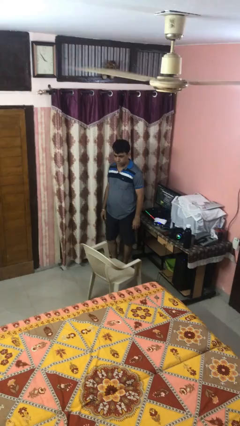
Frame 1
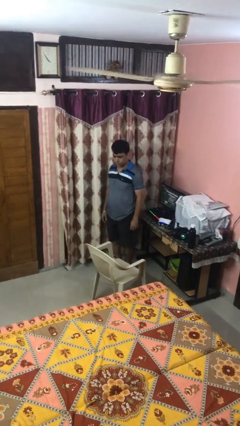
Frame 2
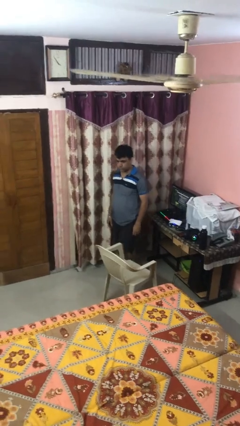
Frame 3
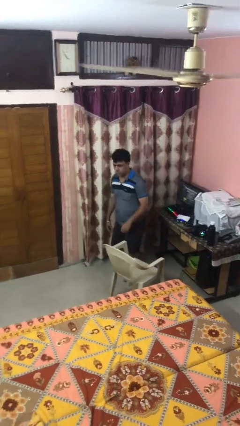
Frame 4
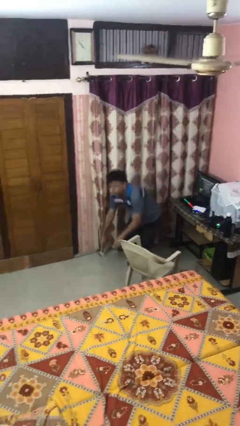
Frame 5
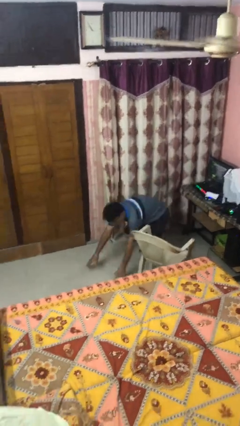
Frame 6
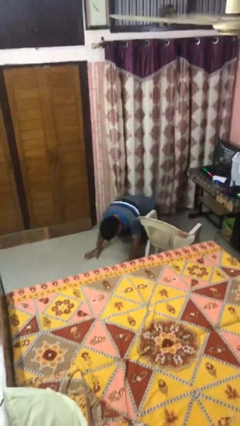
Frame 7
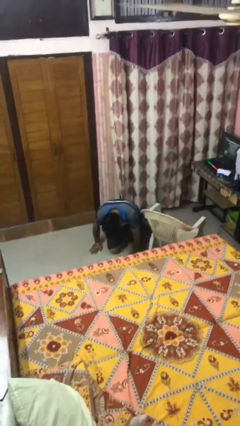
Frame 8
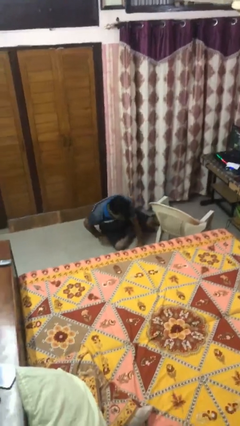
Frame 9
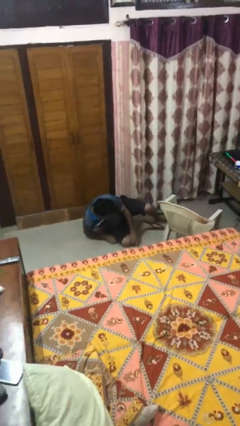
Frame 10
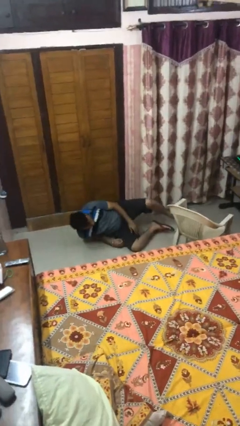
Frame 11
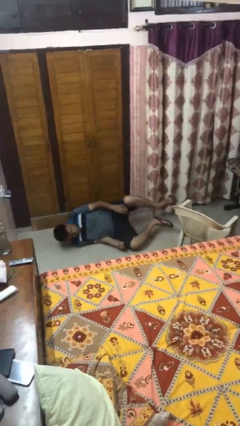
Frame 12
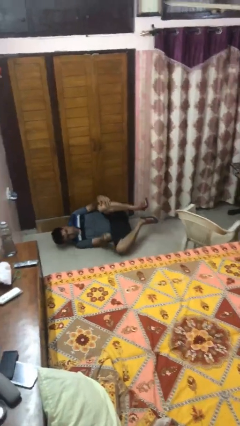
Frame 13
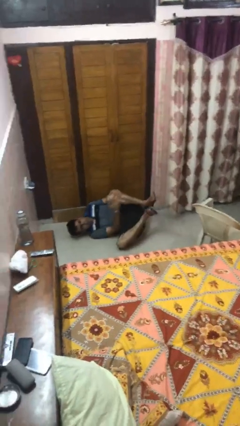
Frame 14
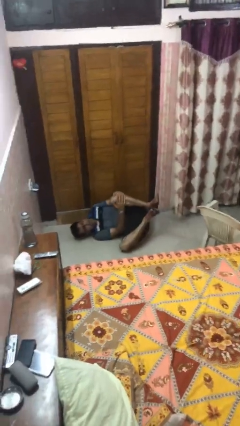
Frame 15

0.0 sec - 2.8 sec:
person trips on object on floor

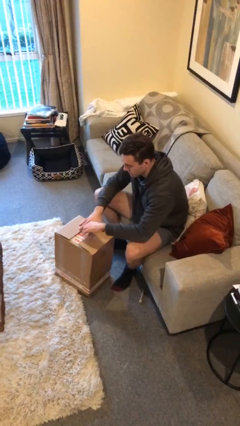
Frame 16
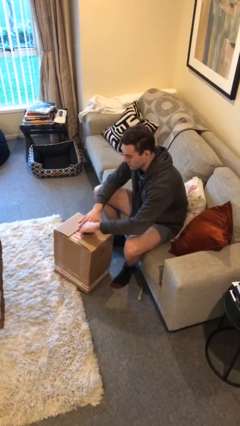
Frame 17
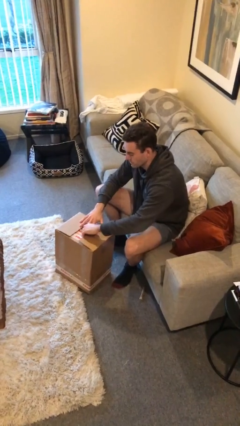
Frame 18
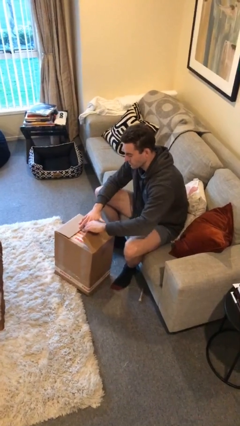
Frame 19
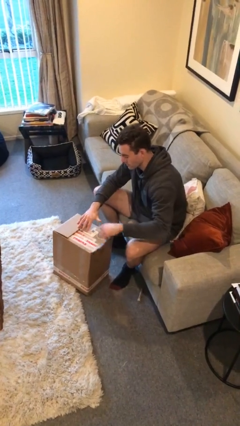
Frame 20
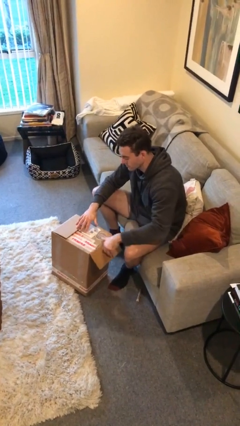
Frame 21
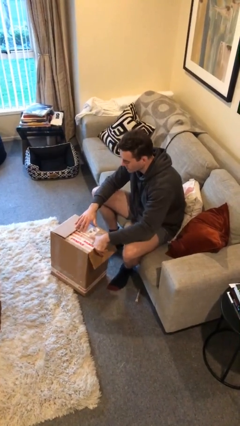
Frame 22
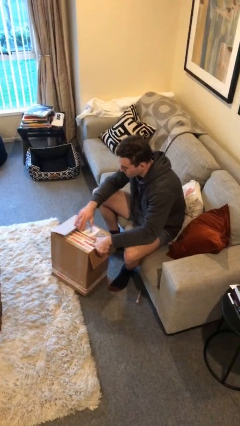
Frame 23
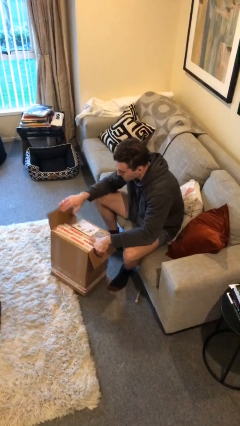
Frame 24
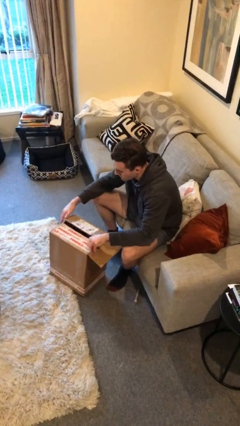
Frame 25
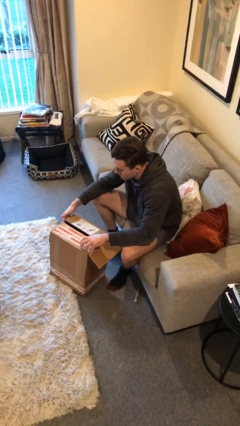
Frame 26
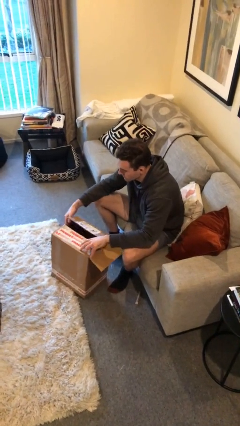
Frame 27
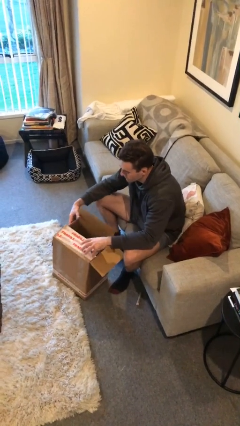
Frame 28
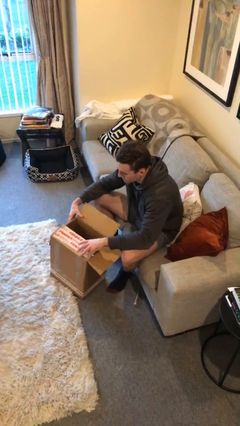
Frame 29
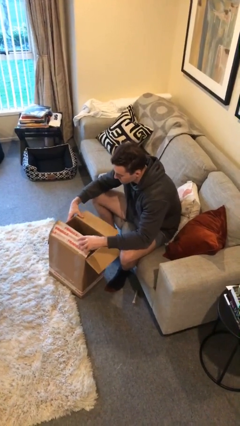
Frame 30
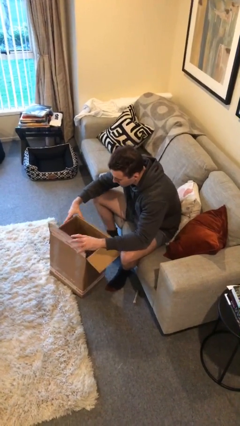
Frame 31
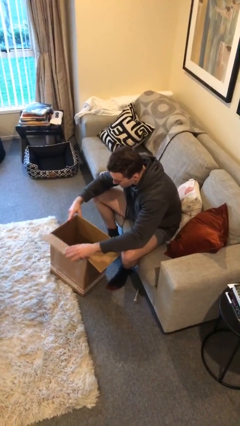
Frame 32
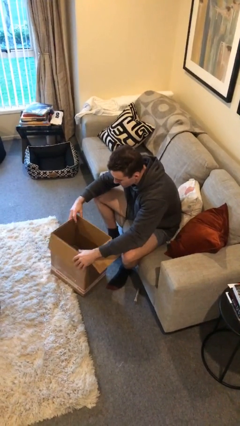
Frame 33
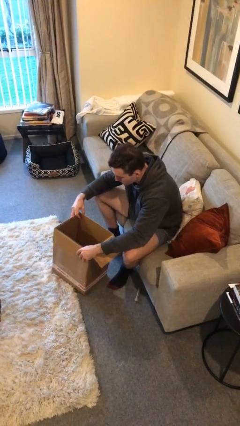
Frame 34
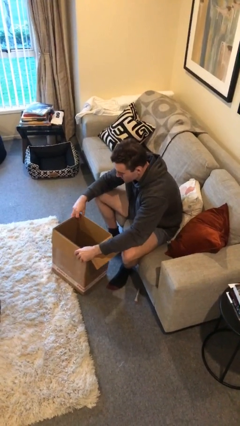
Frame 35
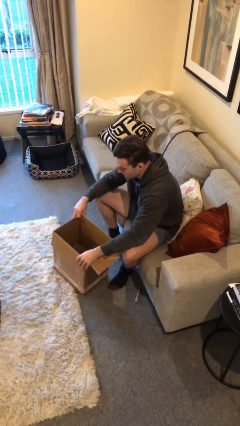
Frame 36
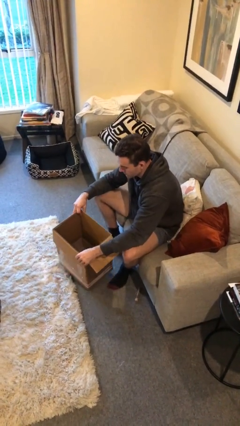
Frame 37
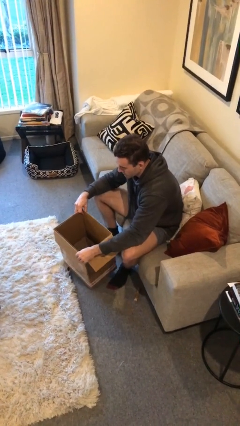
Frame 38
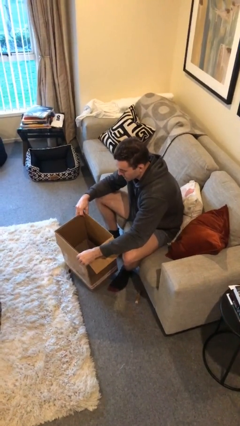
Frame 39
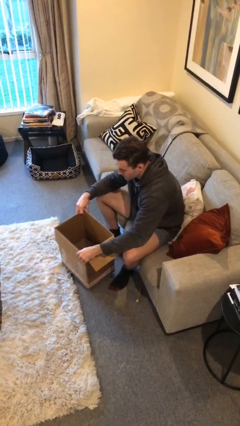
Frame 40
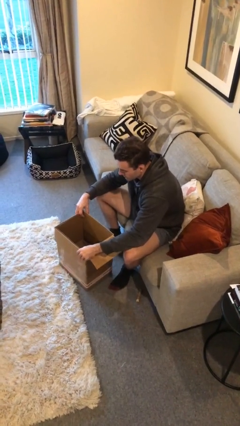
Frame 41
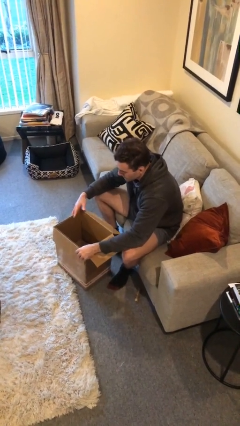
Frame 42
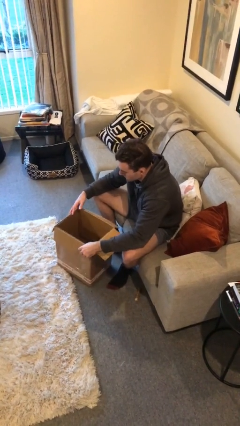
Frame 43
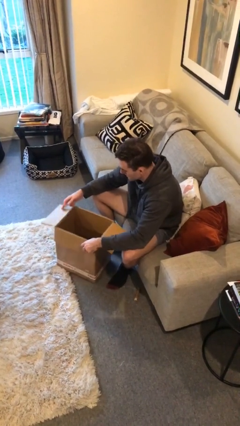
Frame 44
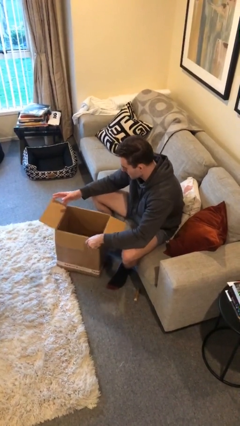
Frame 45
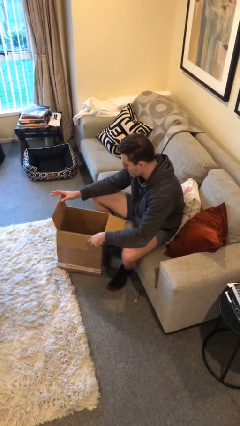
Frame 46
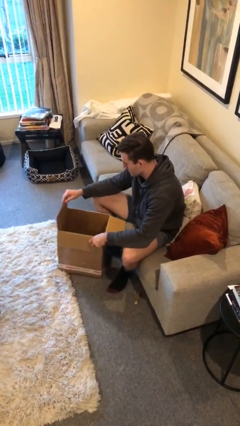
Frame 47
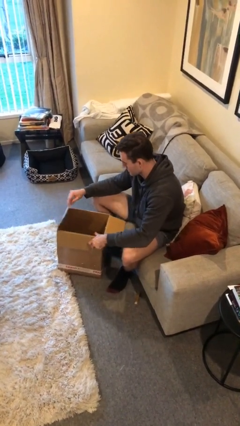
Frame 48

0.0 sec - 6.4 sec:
person opens box

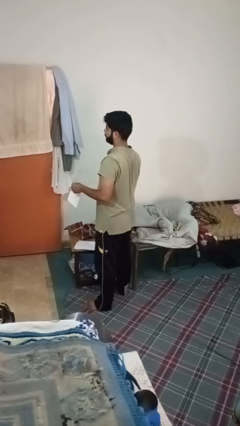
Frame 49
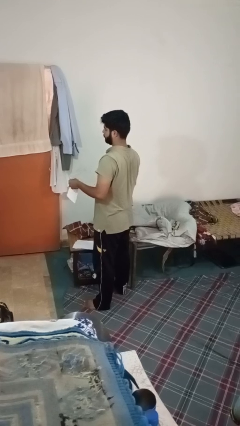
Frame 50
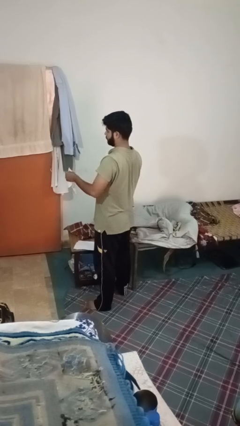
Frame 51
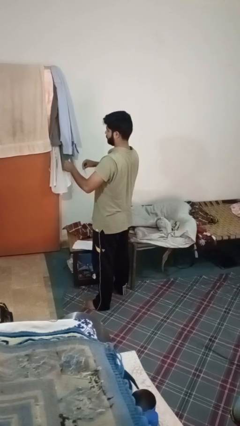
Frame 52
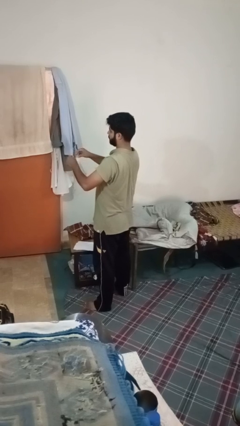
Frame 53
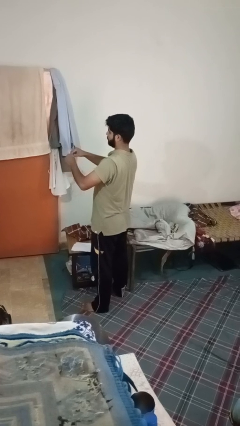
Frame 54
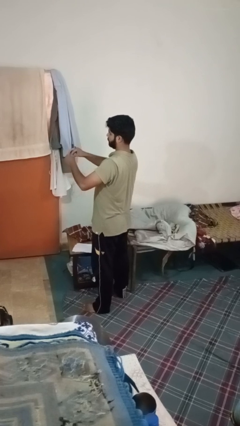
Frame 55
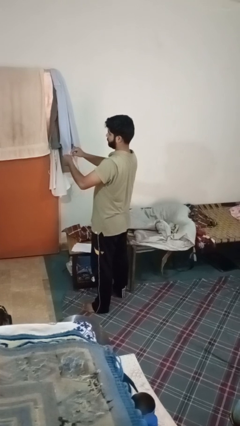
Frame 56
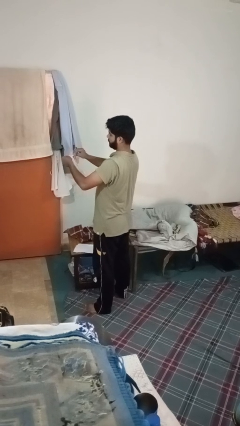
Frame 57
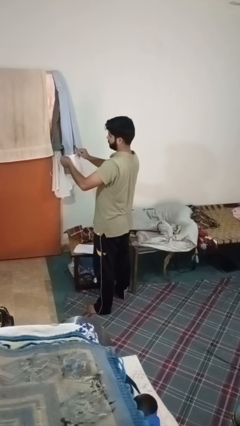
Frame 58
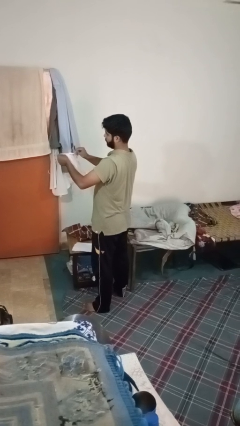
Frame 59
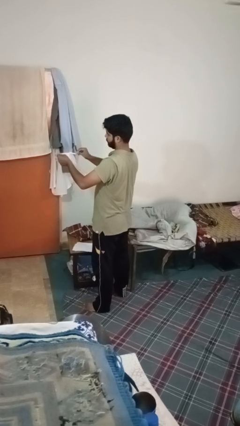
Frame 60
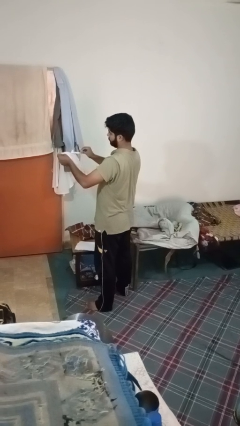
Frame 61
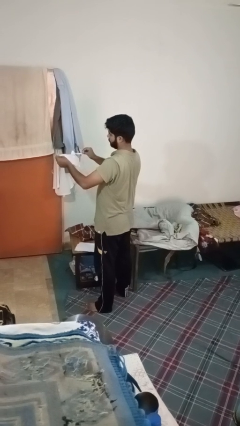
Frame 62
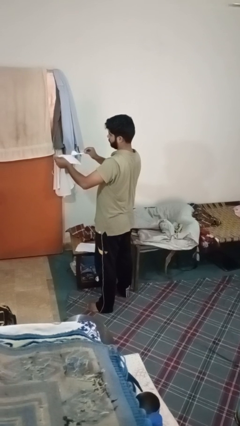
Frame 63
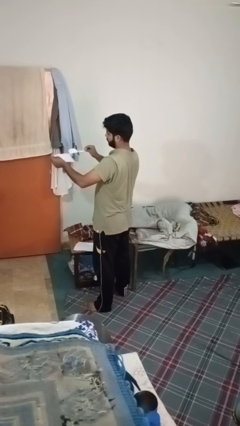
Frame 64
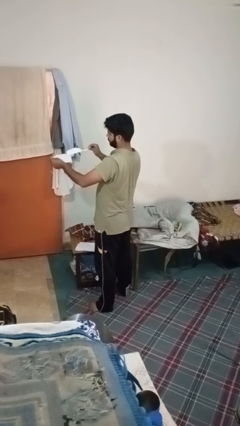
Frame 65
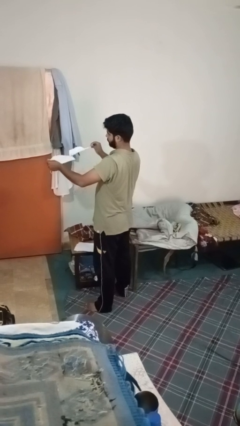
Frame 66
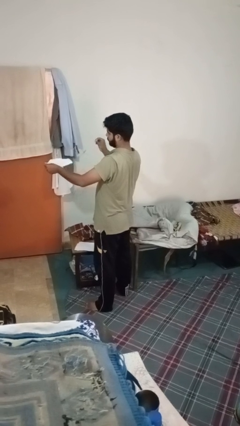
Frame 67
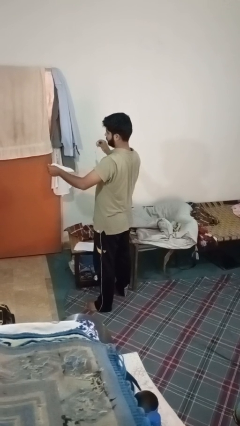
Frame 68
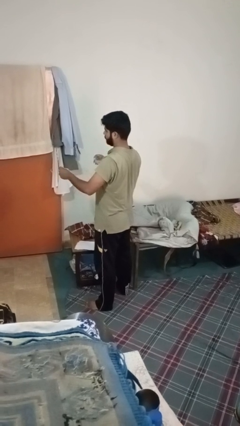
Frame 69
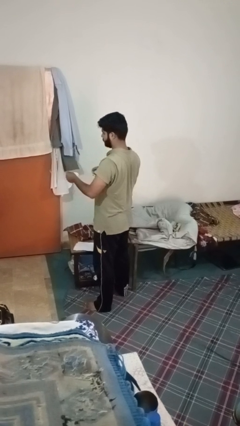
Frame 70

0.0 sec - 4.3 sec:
person tears paper

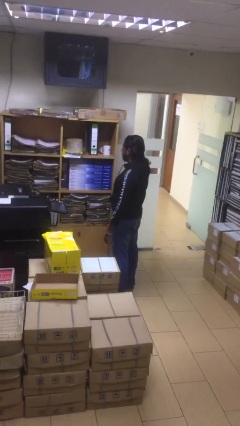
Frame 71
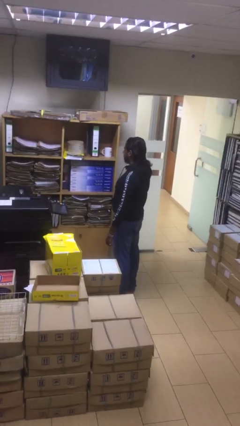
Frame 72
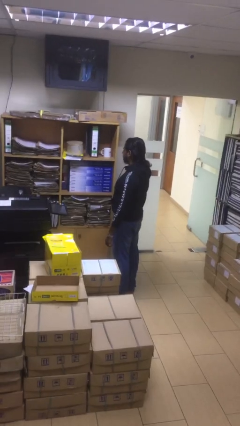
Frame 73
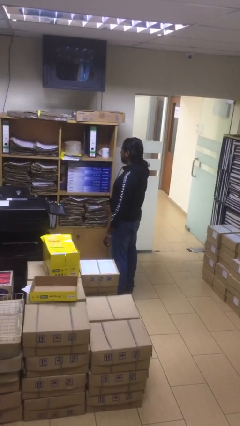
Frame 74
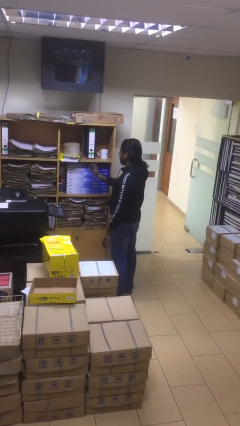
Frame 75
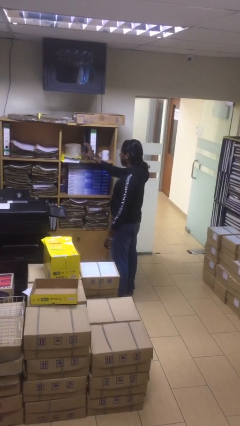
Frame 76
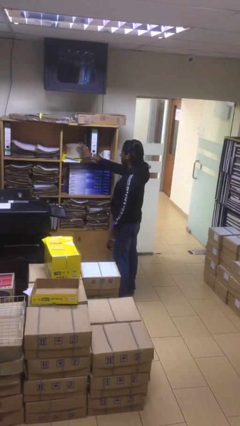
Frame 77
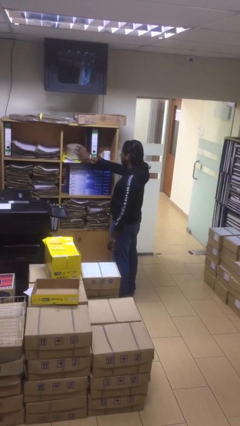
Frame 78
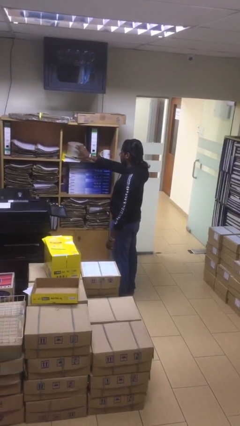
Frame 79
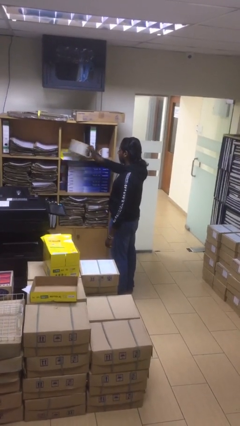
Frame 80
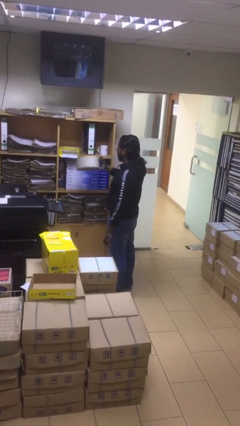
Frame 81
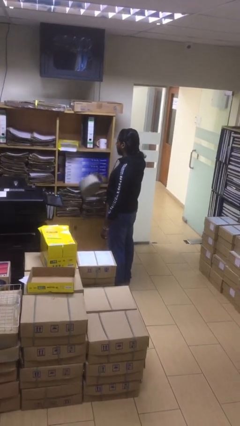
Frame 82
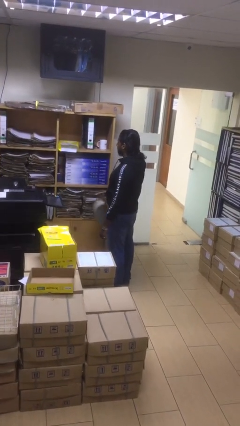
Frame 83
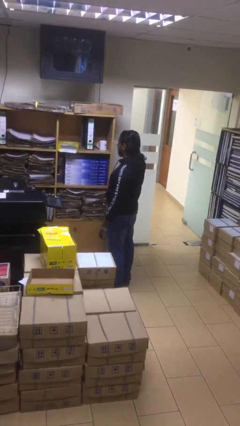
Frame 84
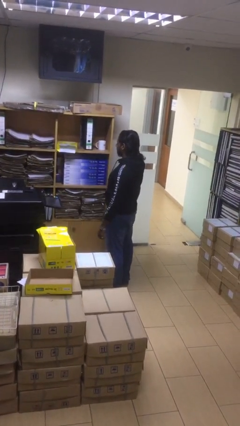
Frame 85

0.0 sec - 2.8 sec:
person picks up object from cabinet

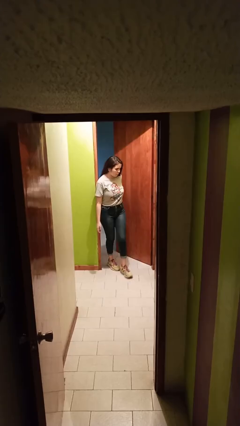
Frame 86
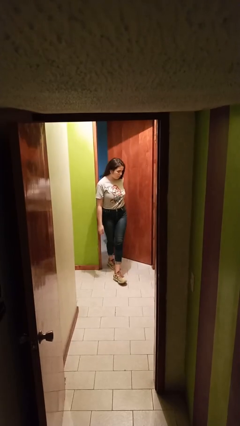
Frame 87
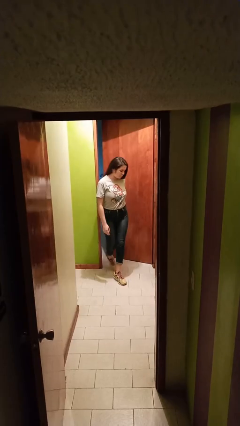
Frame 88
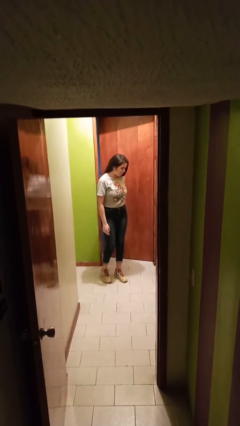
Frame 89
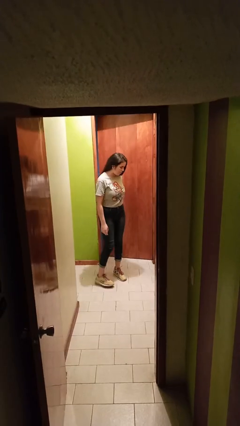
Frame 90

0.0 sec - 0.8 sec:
person closes facility door

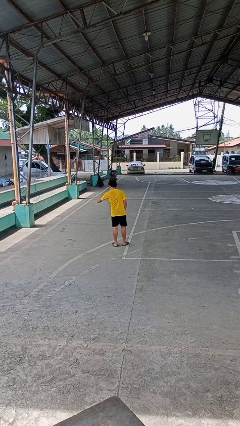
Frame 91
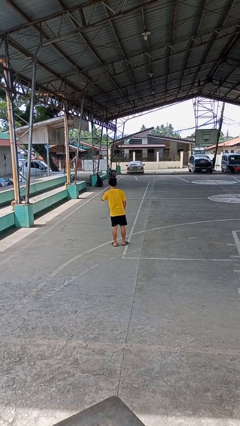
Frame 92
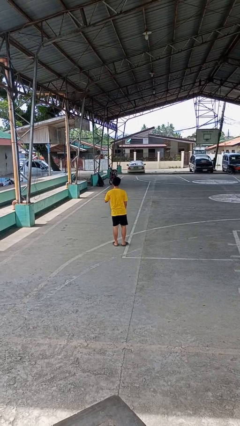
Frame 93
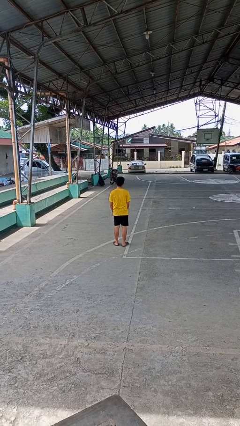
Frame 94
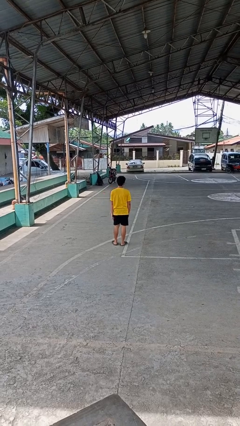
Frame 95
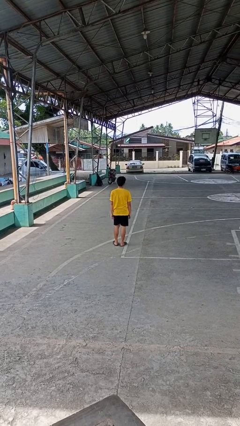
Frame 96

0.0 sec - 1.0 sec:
person karate chop
